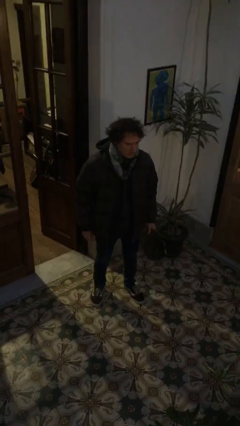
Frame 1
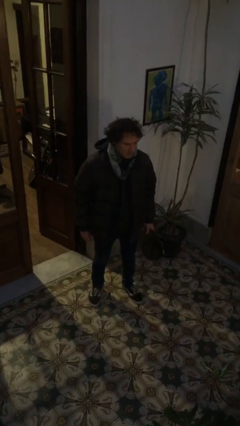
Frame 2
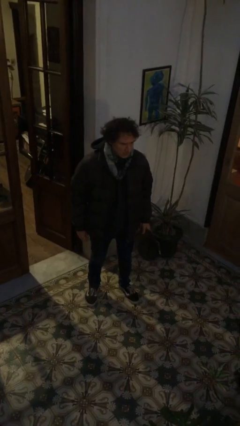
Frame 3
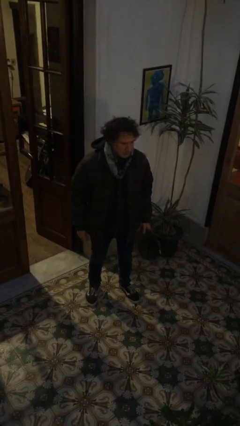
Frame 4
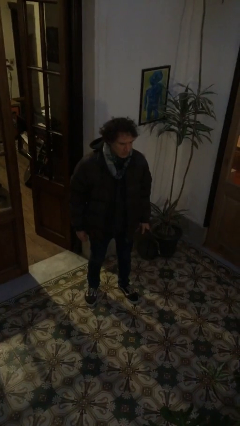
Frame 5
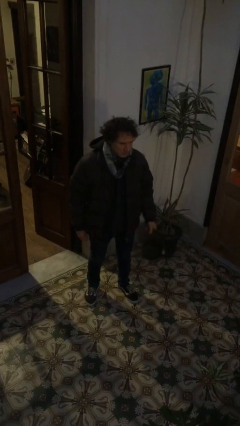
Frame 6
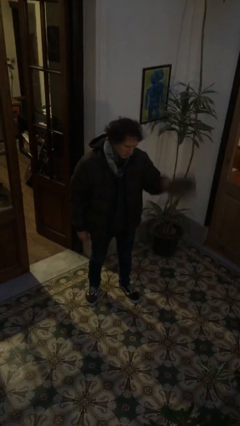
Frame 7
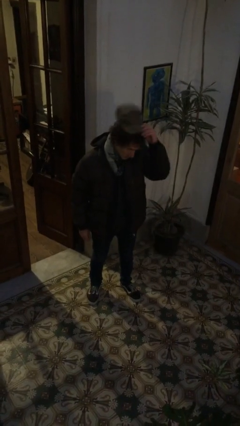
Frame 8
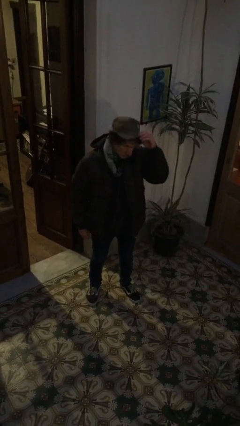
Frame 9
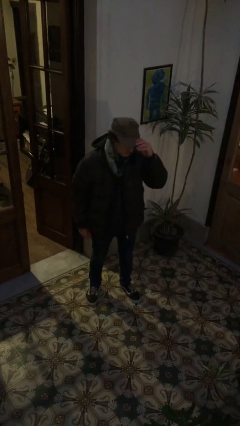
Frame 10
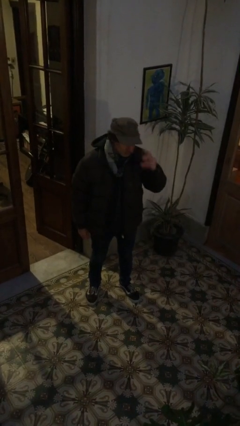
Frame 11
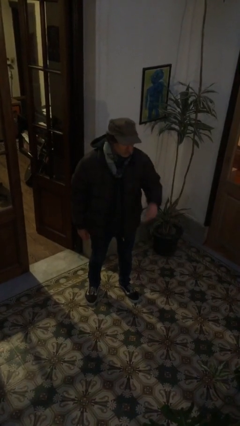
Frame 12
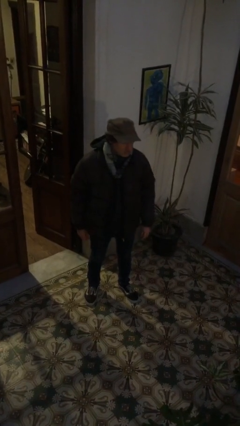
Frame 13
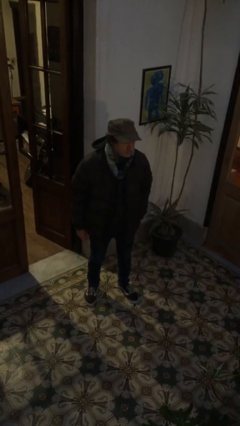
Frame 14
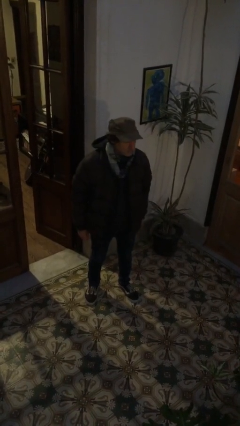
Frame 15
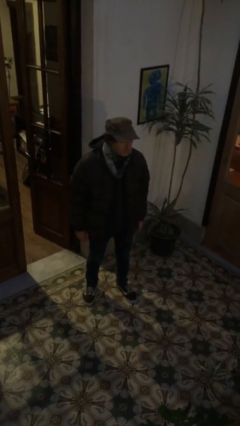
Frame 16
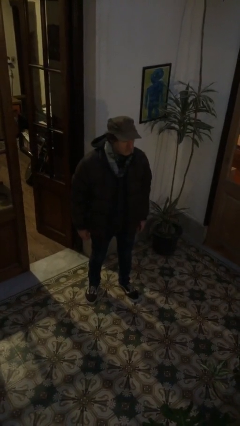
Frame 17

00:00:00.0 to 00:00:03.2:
person puts on hat

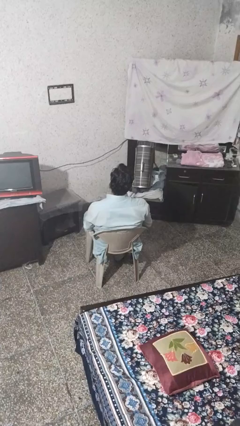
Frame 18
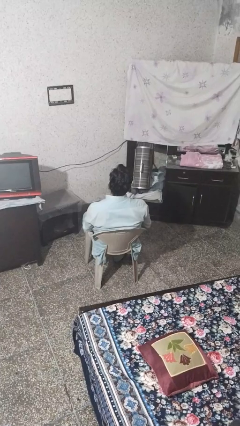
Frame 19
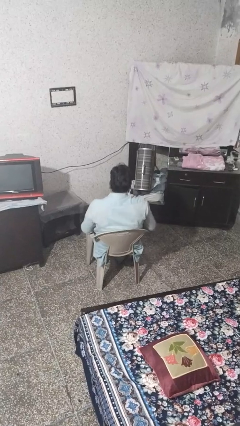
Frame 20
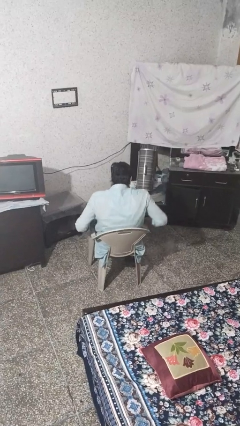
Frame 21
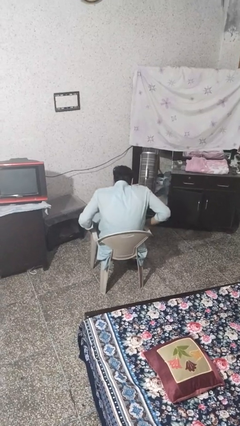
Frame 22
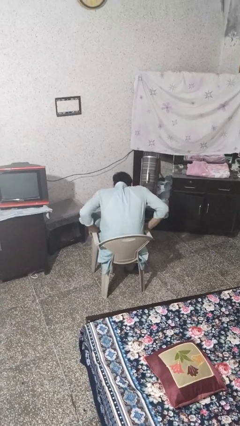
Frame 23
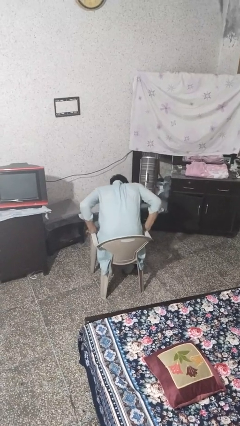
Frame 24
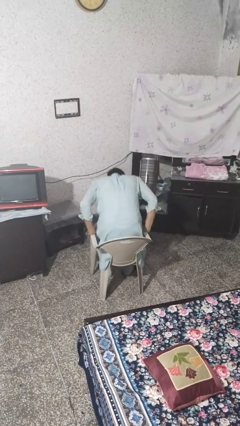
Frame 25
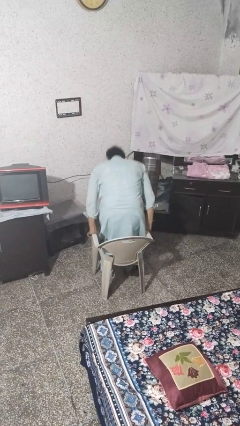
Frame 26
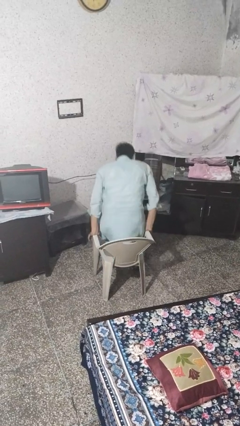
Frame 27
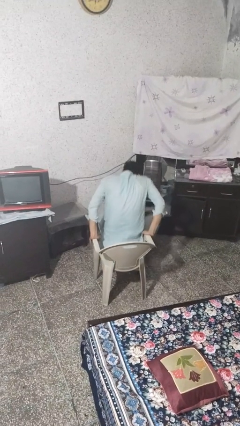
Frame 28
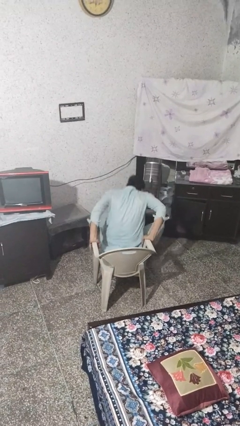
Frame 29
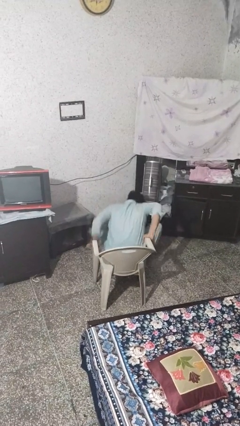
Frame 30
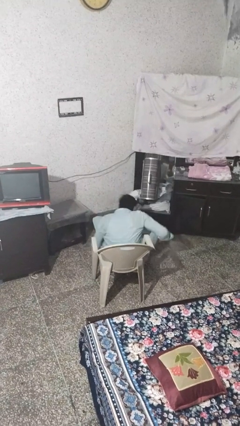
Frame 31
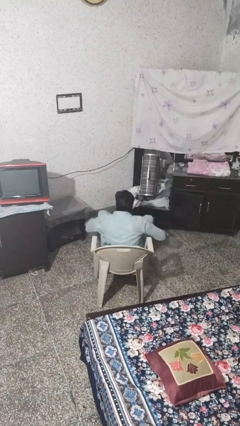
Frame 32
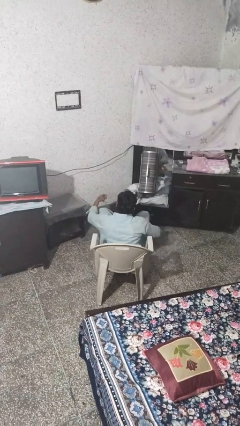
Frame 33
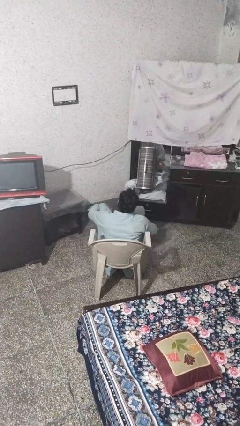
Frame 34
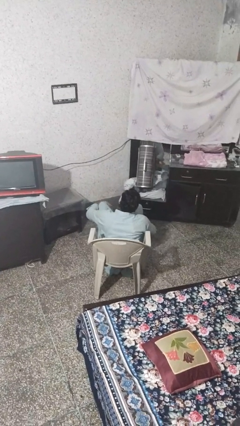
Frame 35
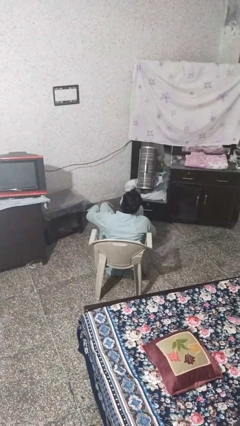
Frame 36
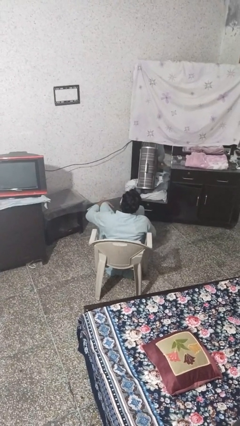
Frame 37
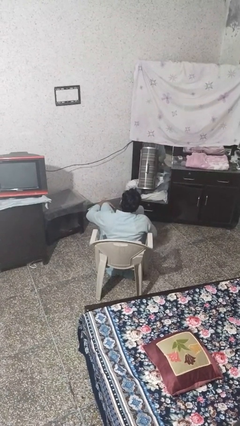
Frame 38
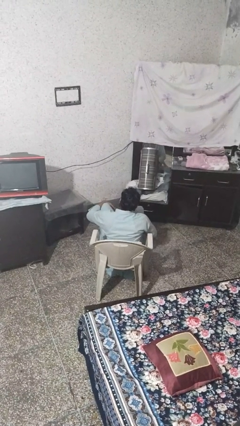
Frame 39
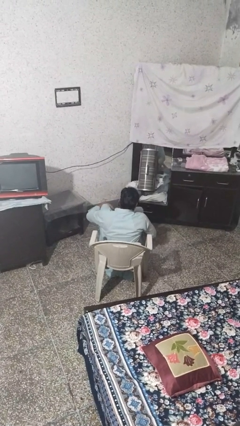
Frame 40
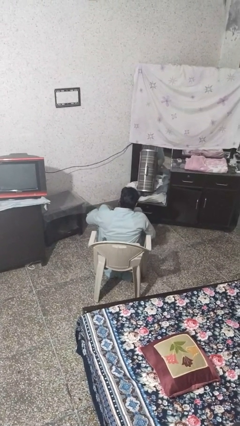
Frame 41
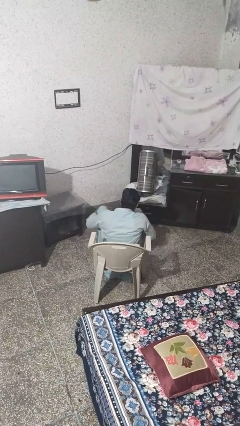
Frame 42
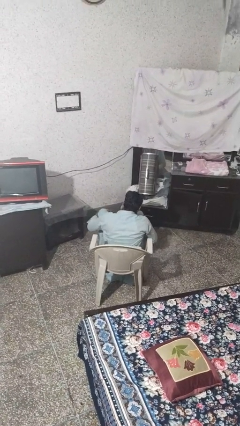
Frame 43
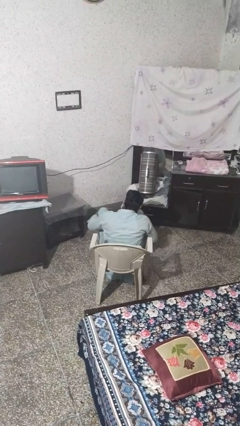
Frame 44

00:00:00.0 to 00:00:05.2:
person falls from chair

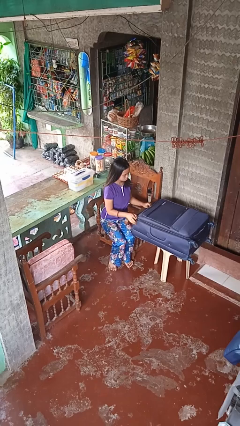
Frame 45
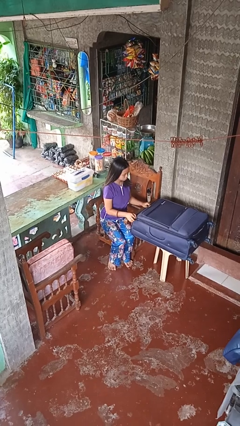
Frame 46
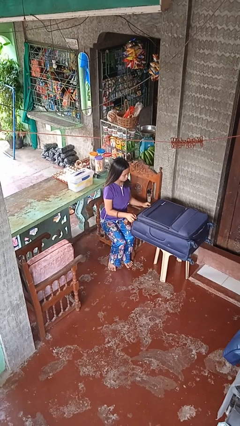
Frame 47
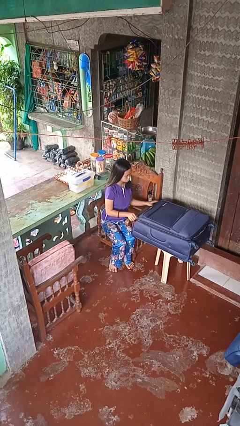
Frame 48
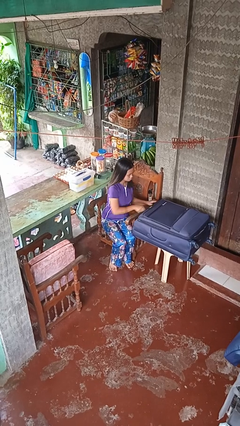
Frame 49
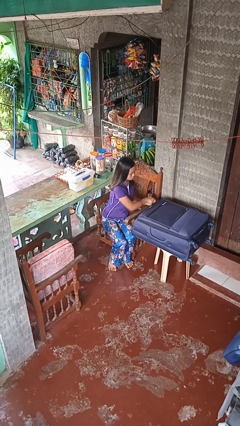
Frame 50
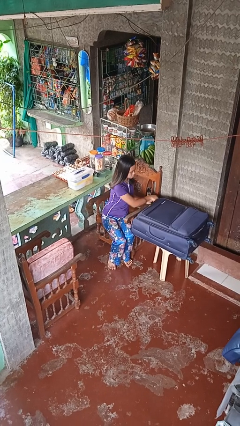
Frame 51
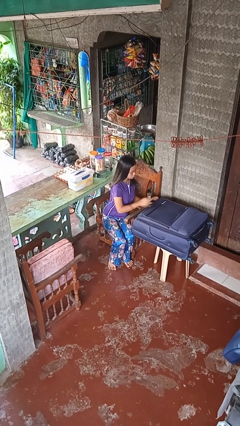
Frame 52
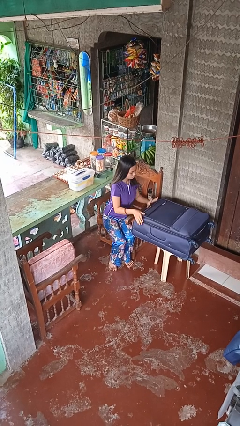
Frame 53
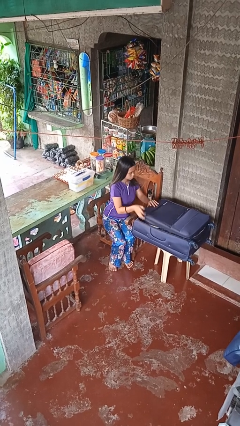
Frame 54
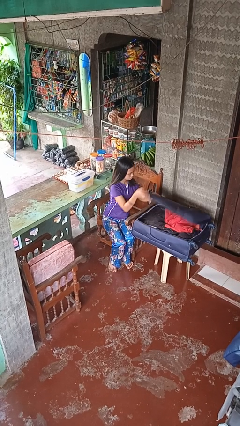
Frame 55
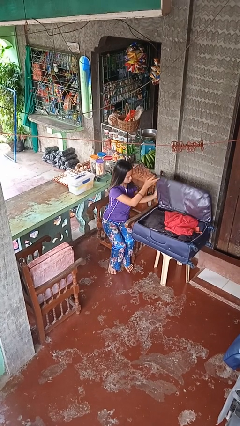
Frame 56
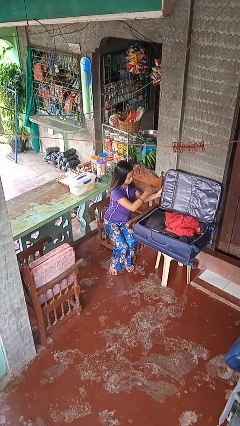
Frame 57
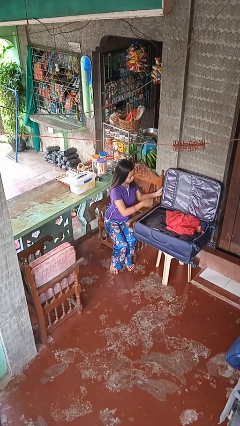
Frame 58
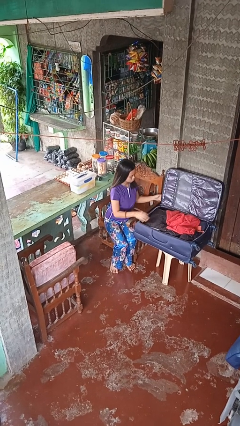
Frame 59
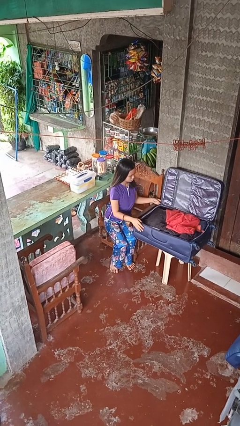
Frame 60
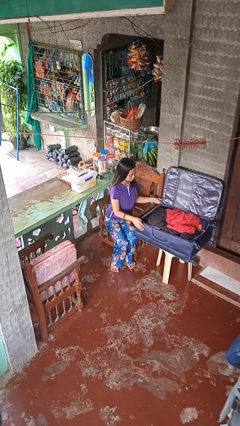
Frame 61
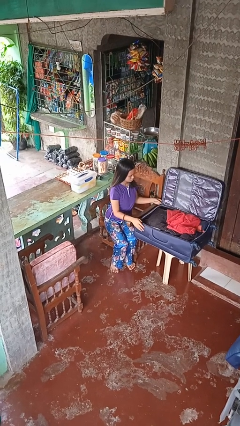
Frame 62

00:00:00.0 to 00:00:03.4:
person opens suitcase

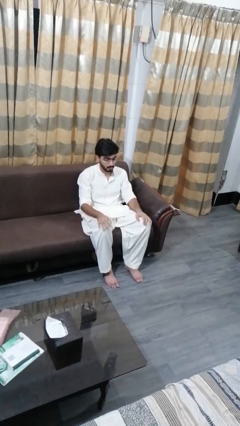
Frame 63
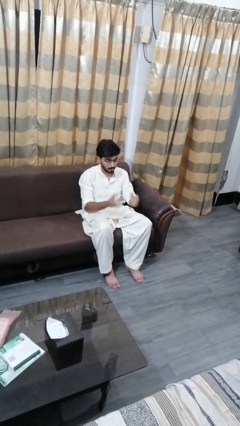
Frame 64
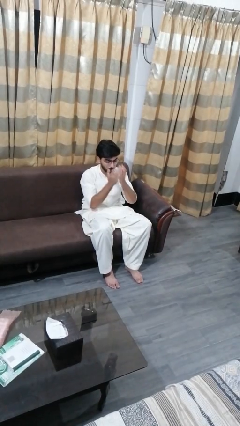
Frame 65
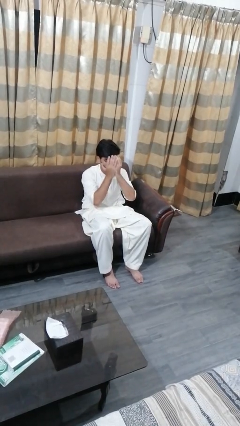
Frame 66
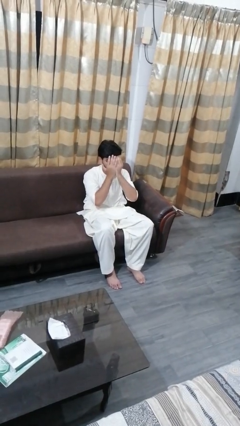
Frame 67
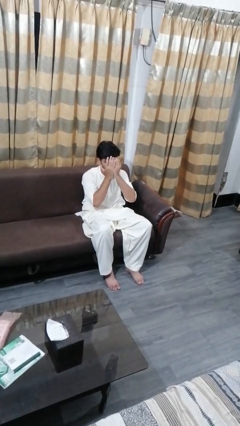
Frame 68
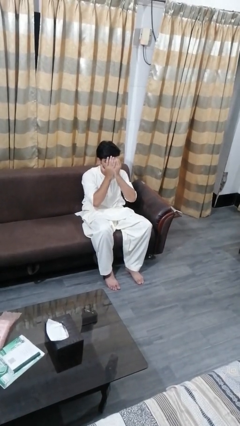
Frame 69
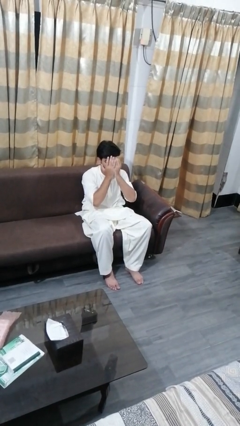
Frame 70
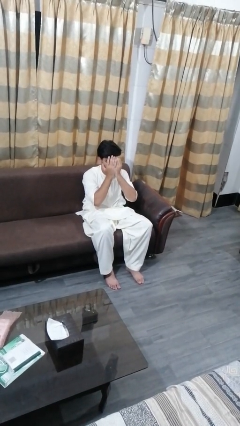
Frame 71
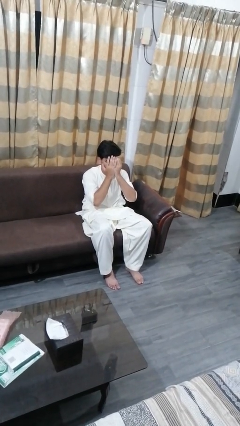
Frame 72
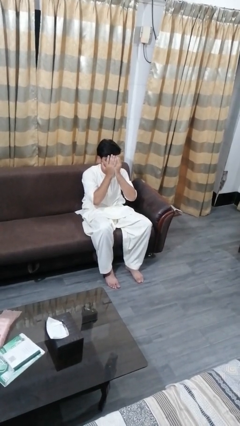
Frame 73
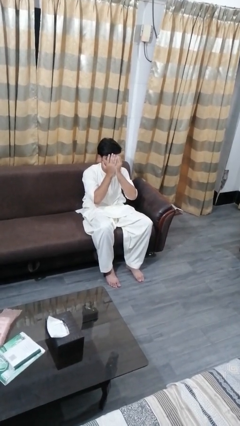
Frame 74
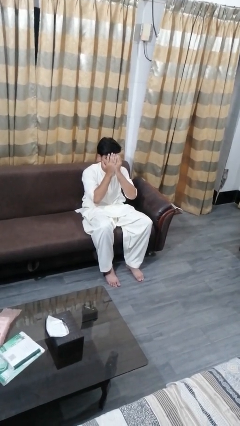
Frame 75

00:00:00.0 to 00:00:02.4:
person covers face with hands

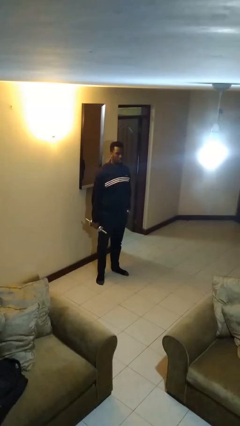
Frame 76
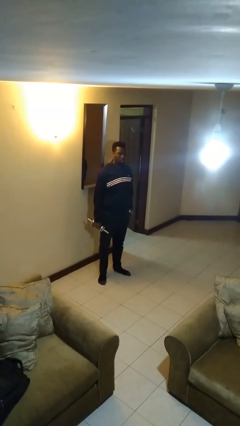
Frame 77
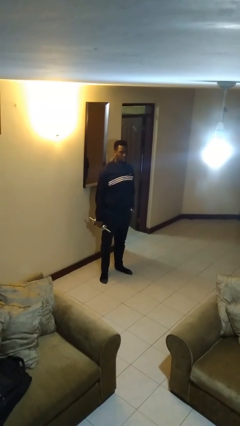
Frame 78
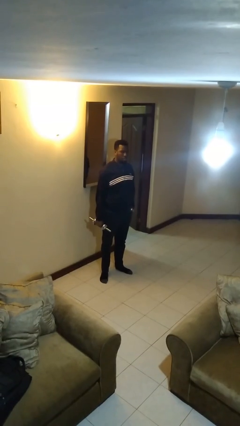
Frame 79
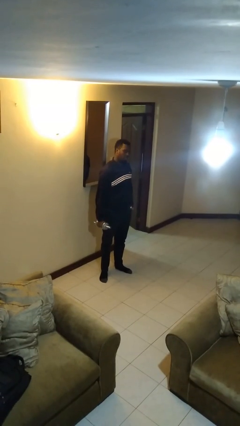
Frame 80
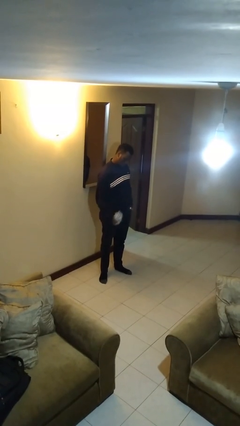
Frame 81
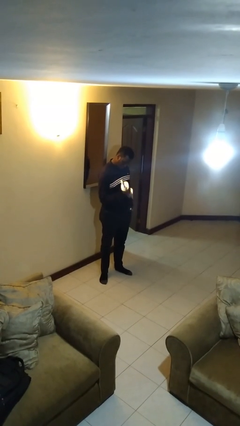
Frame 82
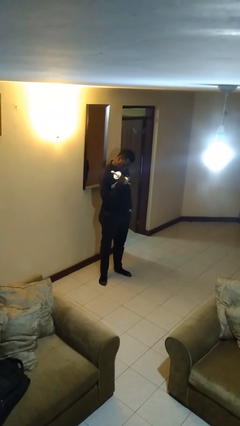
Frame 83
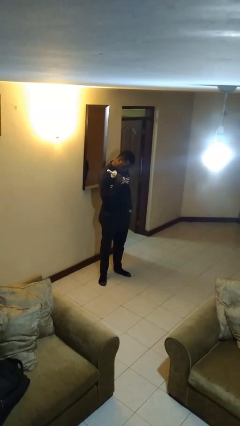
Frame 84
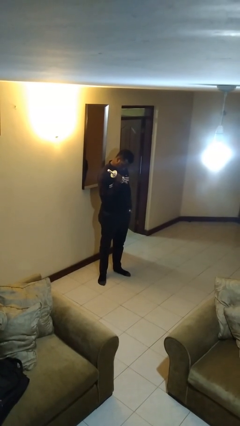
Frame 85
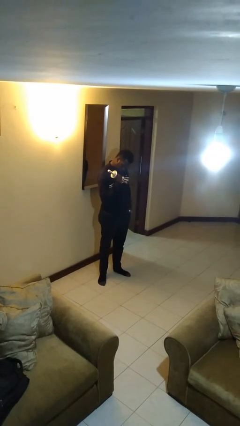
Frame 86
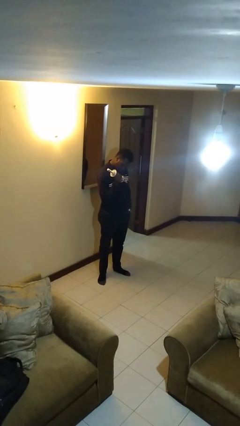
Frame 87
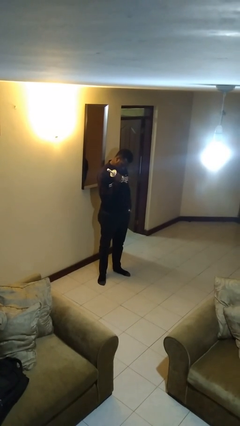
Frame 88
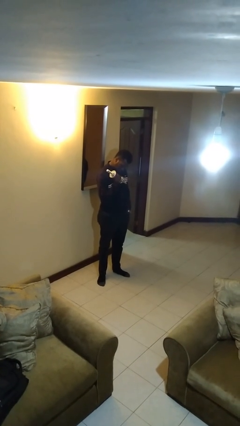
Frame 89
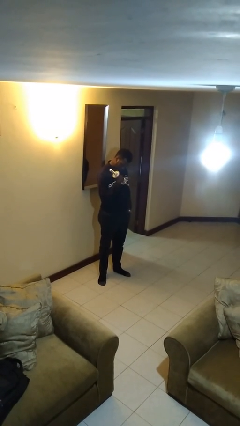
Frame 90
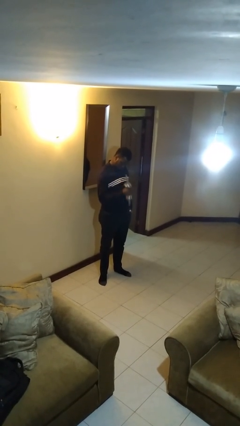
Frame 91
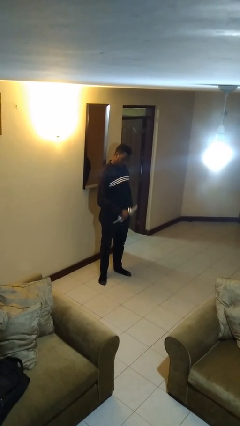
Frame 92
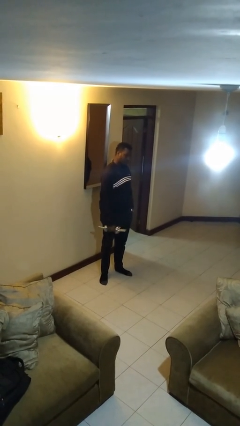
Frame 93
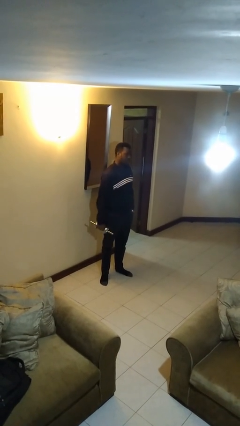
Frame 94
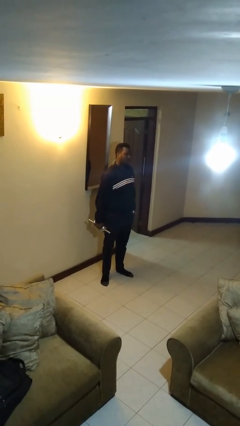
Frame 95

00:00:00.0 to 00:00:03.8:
person lifts dumbbells
